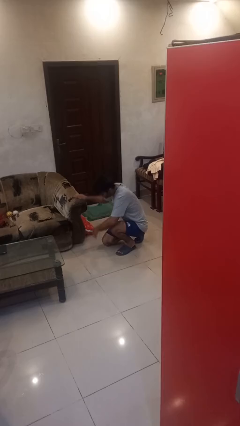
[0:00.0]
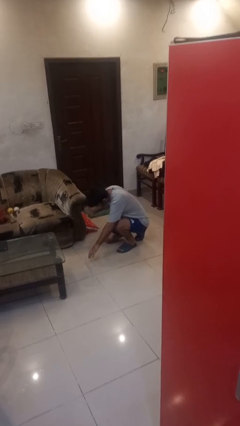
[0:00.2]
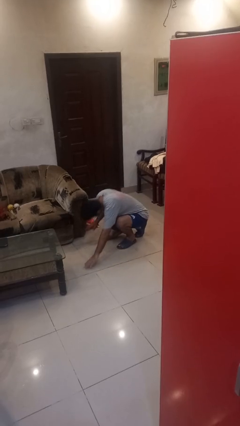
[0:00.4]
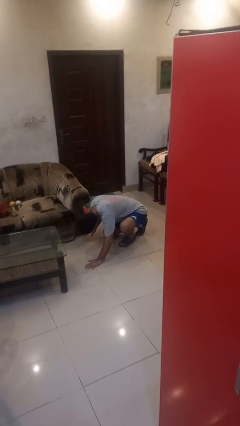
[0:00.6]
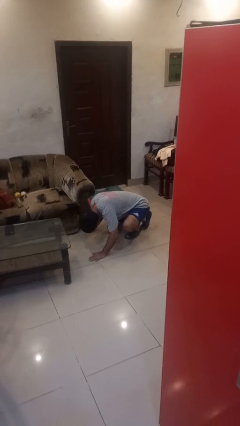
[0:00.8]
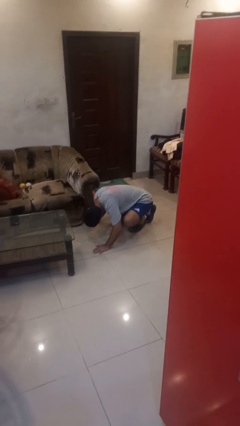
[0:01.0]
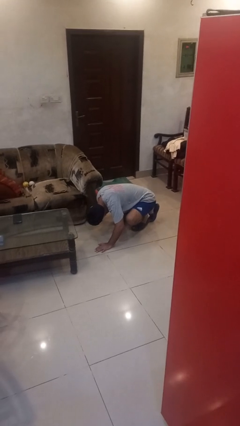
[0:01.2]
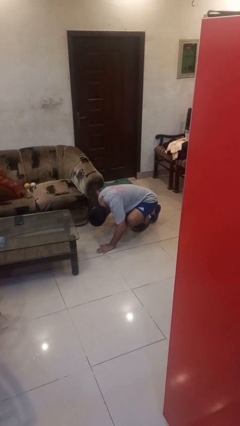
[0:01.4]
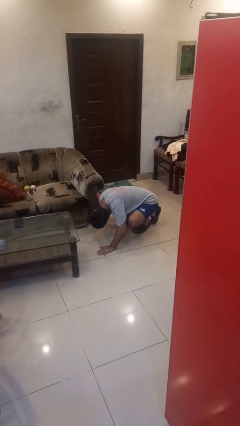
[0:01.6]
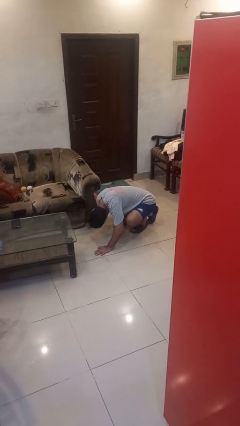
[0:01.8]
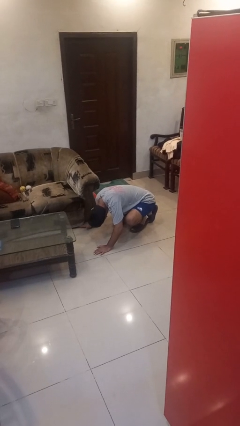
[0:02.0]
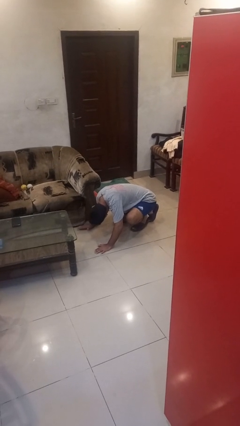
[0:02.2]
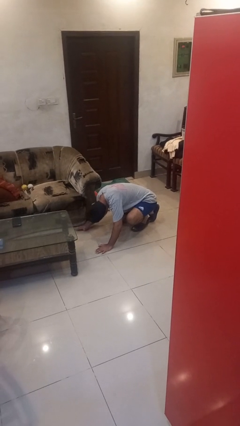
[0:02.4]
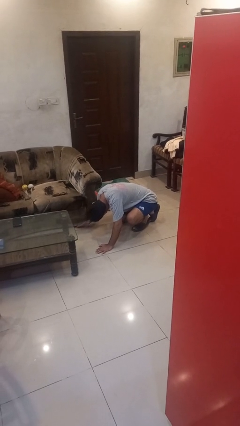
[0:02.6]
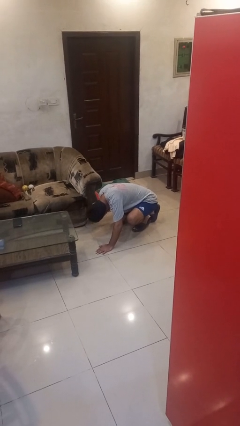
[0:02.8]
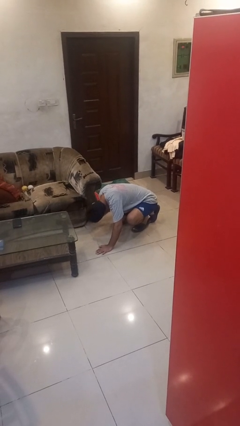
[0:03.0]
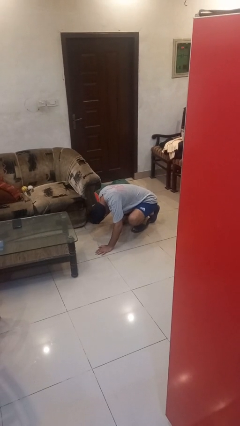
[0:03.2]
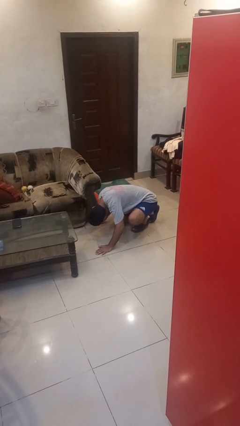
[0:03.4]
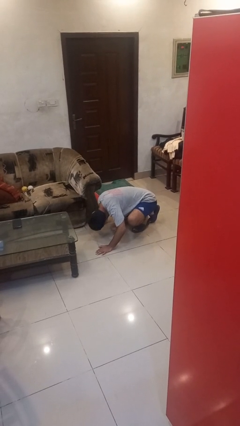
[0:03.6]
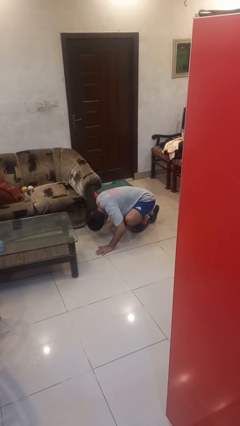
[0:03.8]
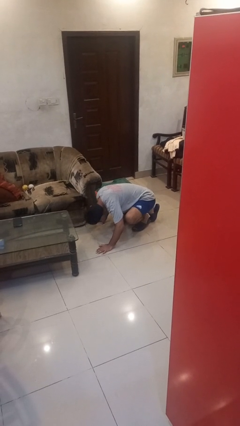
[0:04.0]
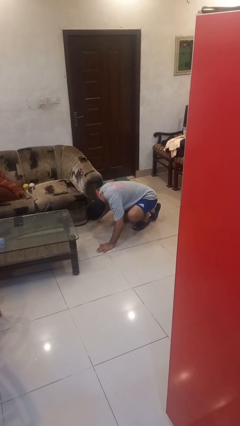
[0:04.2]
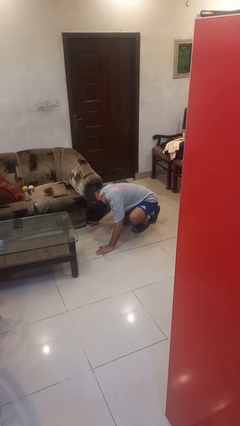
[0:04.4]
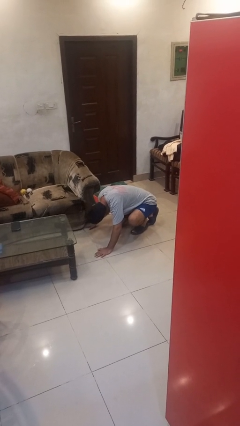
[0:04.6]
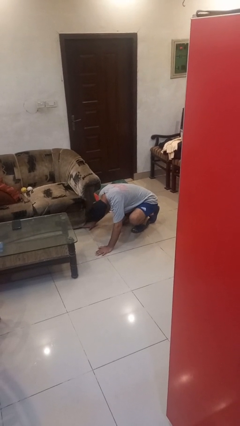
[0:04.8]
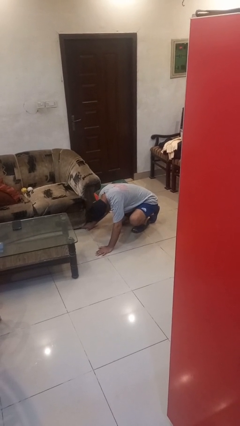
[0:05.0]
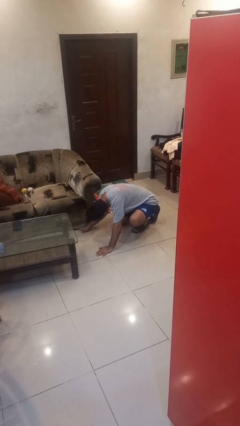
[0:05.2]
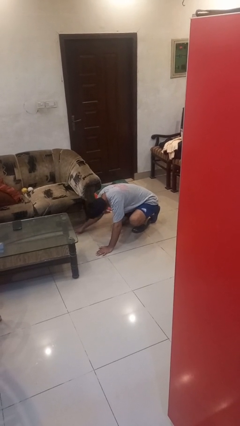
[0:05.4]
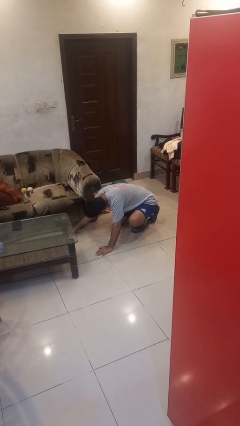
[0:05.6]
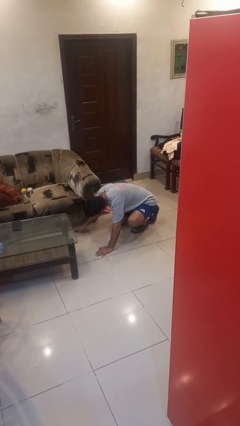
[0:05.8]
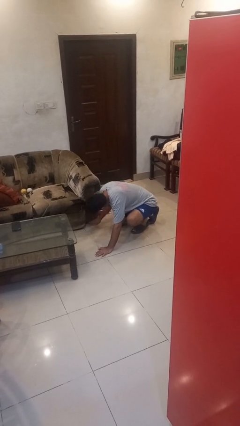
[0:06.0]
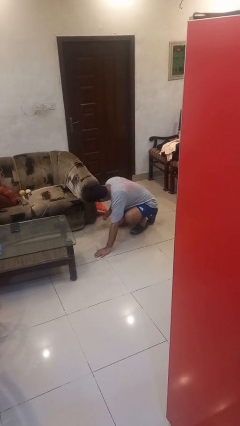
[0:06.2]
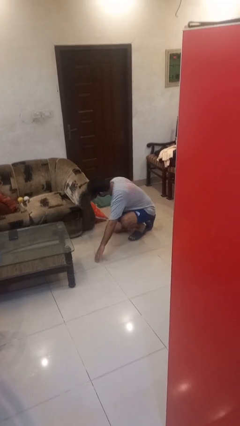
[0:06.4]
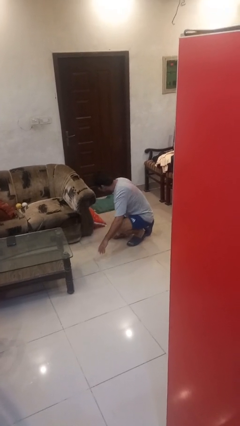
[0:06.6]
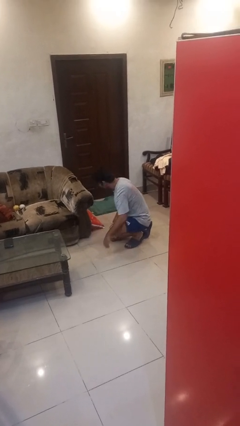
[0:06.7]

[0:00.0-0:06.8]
person searches under couch

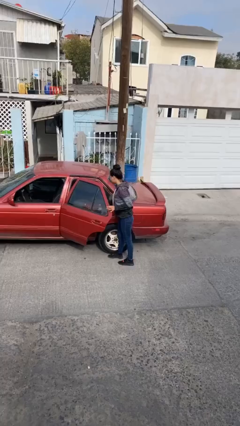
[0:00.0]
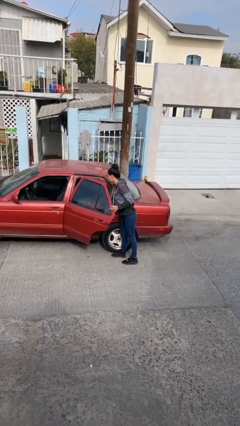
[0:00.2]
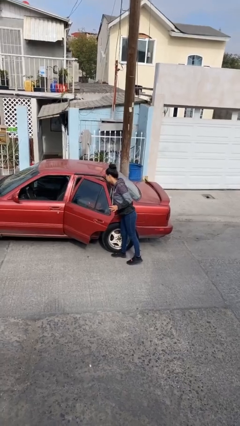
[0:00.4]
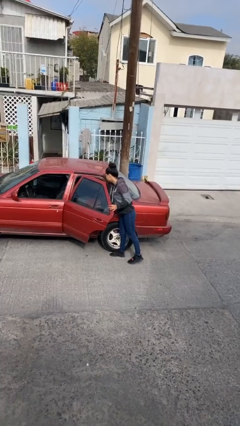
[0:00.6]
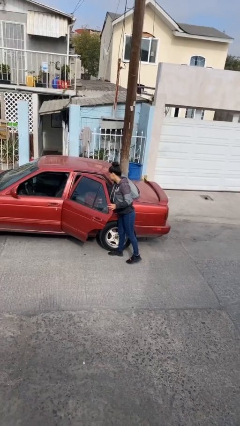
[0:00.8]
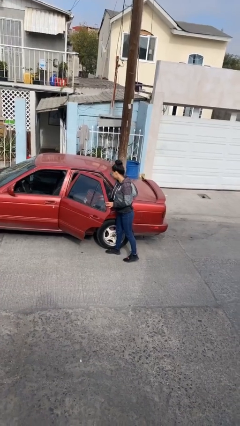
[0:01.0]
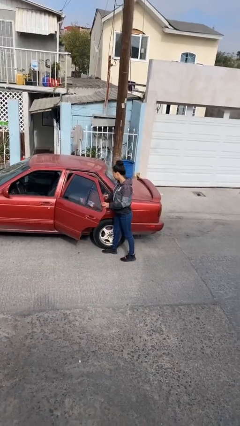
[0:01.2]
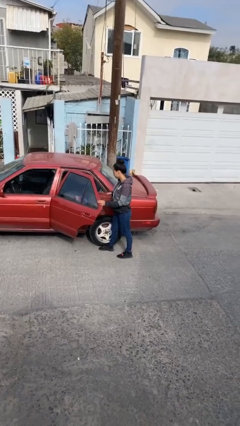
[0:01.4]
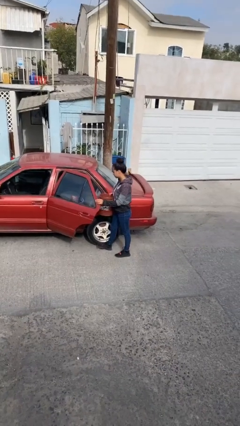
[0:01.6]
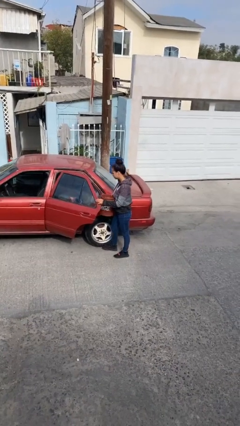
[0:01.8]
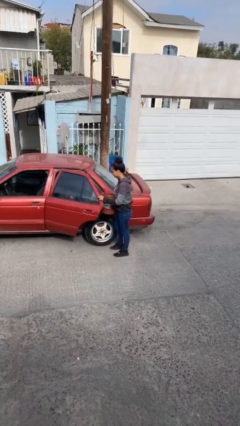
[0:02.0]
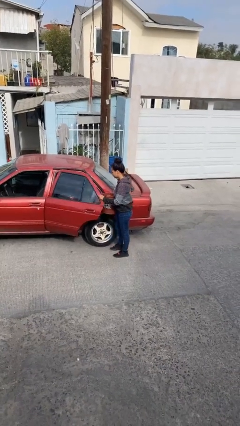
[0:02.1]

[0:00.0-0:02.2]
person unloads car

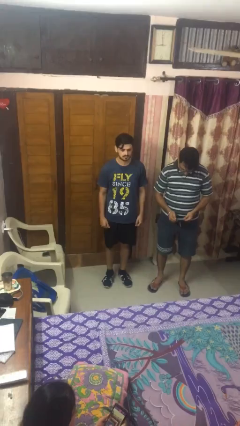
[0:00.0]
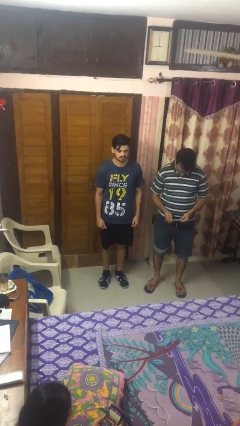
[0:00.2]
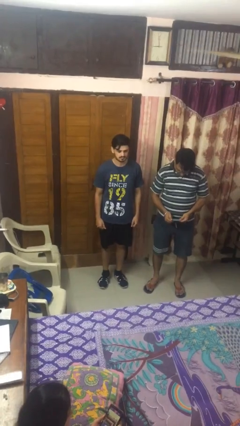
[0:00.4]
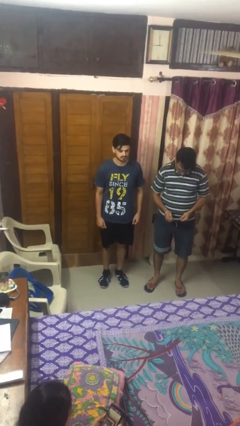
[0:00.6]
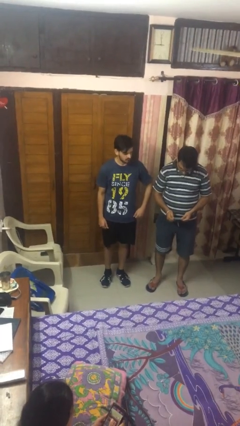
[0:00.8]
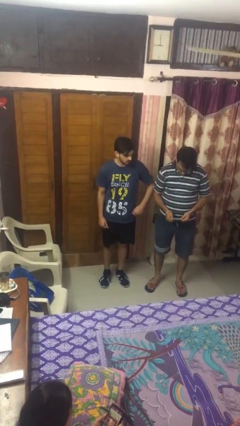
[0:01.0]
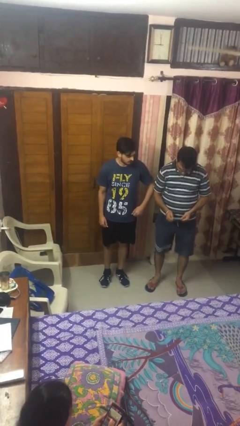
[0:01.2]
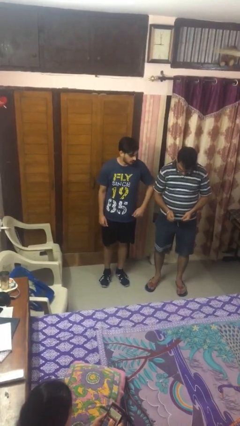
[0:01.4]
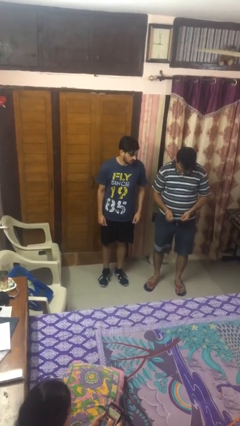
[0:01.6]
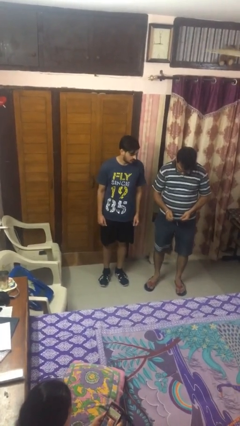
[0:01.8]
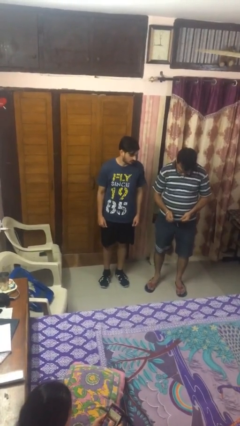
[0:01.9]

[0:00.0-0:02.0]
person nudges person with elbow

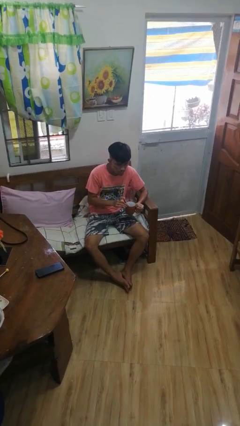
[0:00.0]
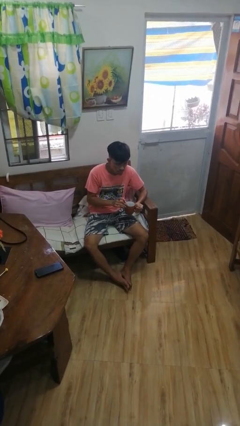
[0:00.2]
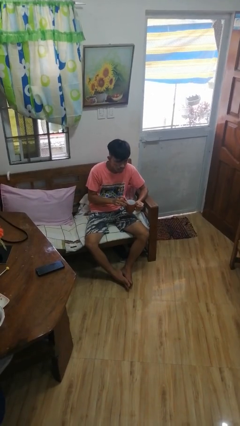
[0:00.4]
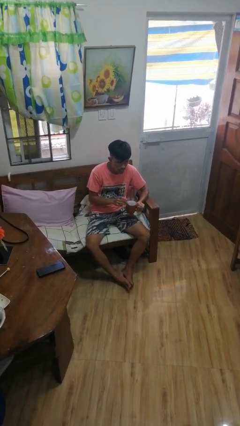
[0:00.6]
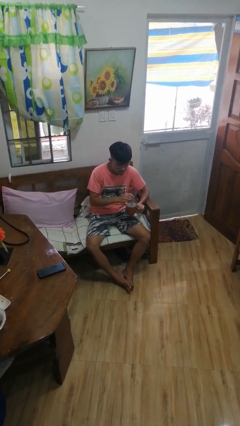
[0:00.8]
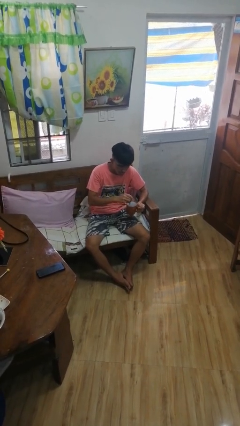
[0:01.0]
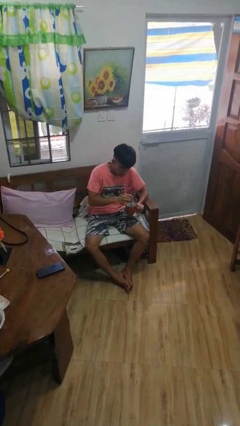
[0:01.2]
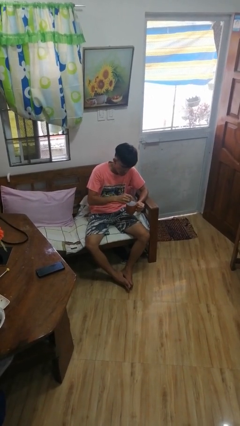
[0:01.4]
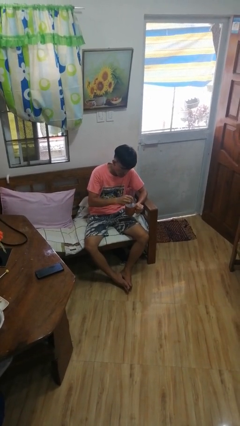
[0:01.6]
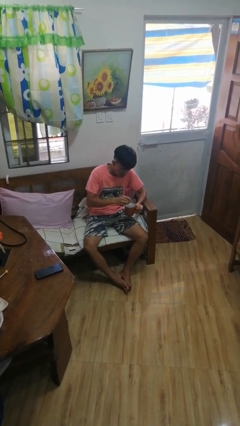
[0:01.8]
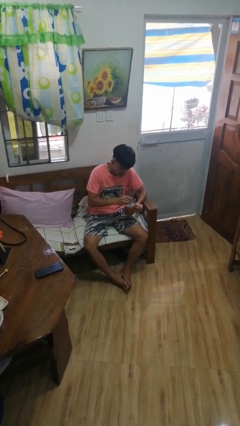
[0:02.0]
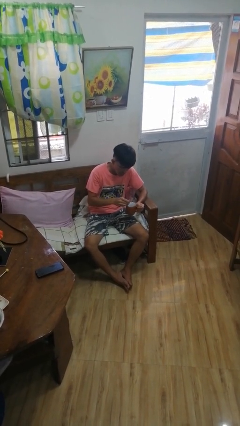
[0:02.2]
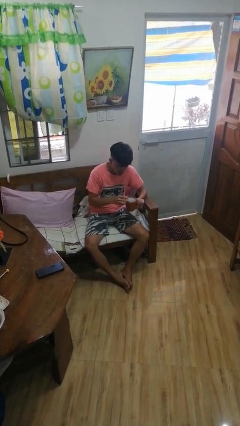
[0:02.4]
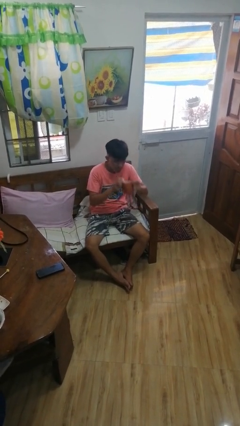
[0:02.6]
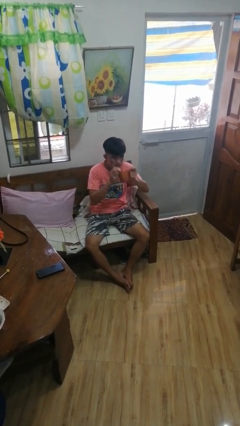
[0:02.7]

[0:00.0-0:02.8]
person stirs mug

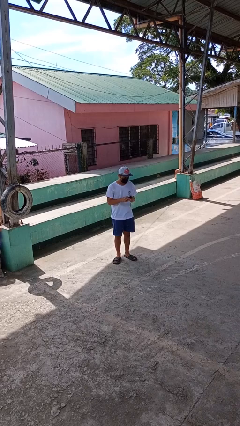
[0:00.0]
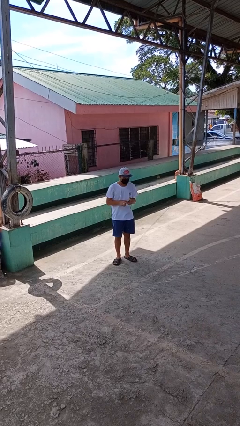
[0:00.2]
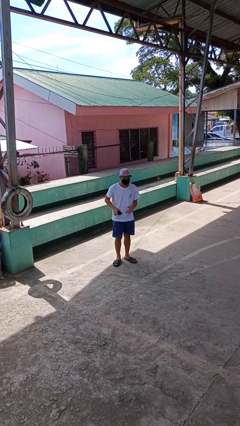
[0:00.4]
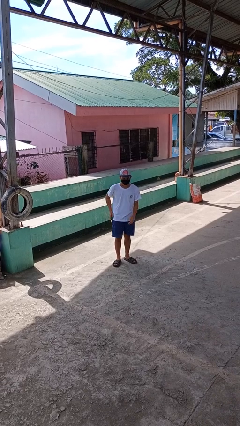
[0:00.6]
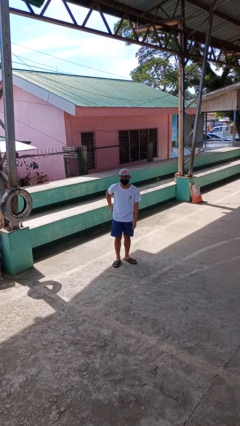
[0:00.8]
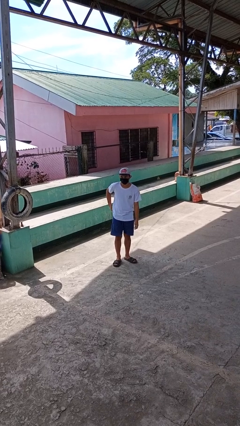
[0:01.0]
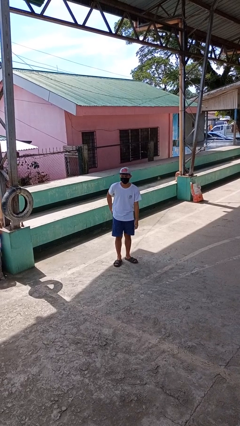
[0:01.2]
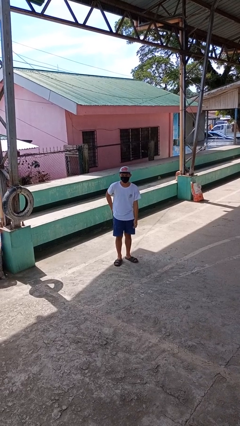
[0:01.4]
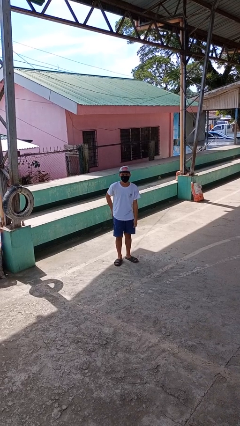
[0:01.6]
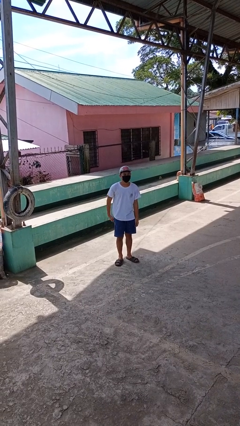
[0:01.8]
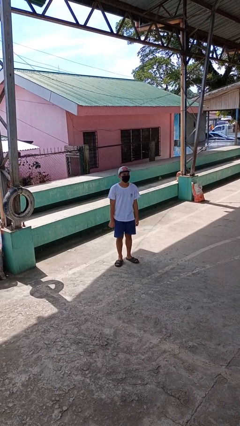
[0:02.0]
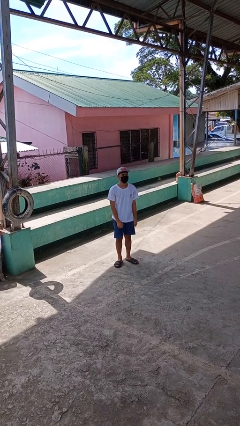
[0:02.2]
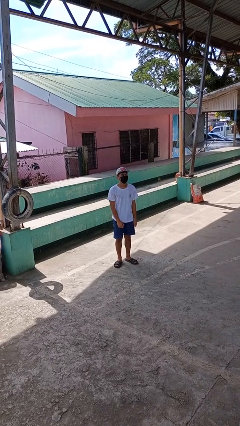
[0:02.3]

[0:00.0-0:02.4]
person puts phone into pocket

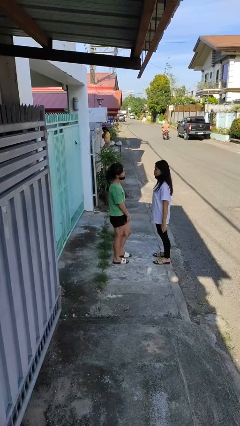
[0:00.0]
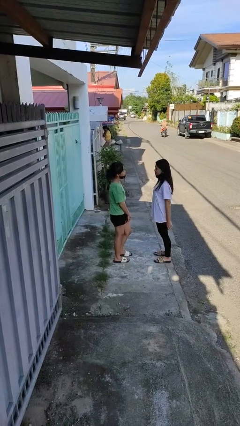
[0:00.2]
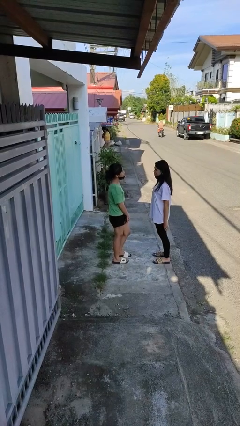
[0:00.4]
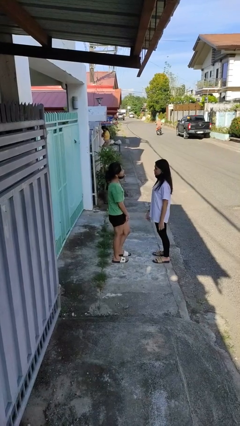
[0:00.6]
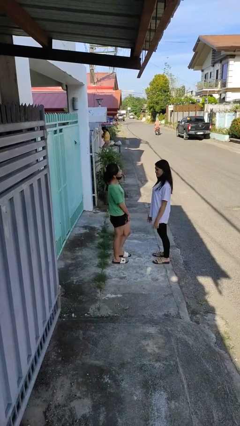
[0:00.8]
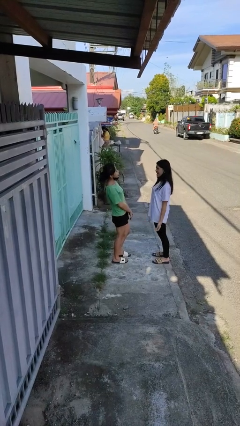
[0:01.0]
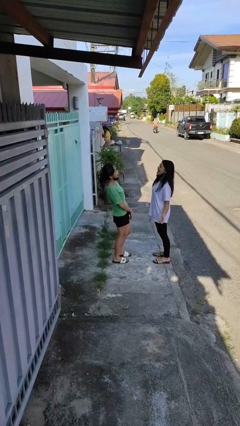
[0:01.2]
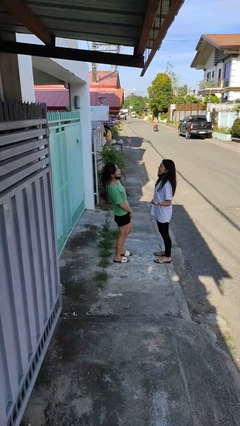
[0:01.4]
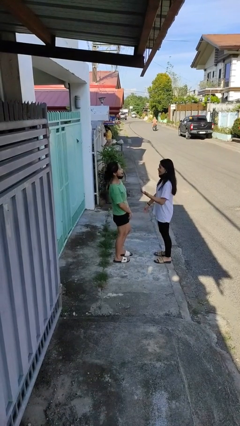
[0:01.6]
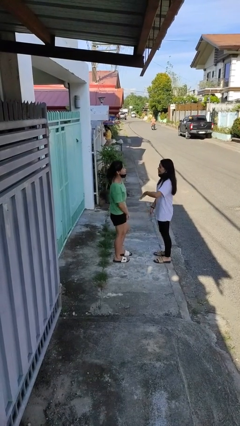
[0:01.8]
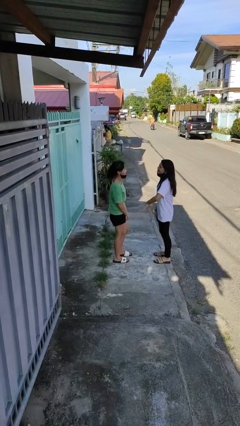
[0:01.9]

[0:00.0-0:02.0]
person laughs with person
